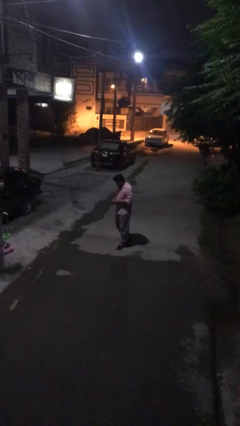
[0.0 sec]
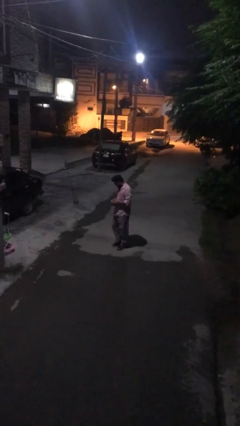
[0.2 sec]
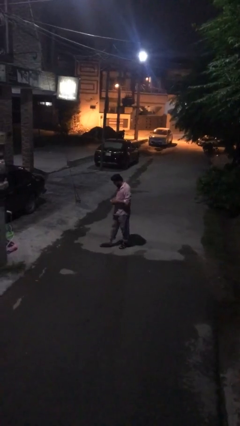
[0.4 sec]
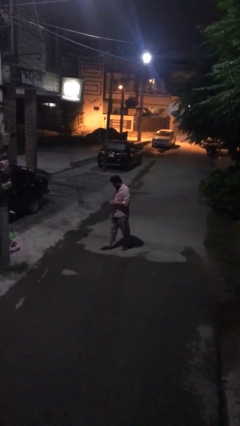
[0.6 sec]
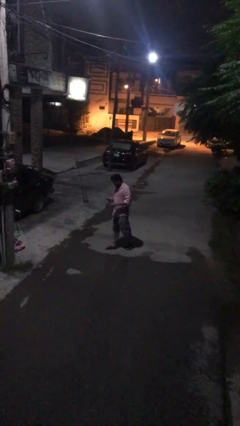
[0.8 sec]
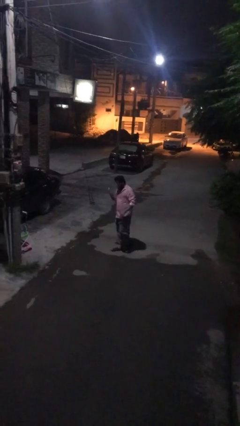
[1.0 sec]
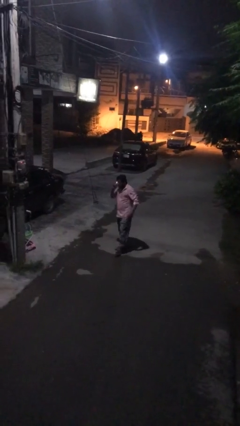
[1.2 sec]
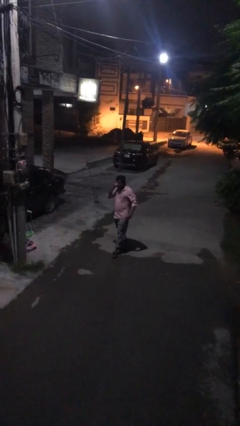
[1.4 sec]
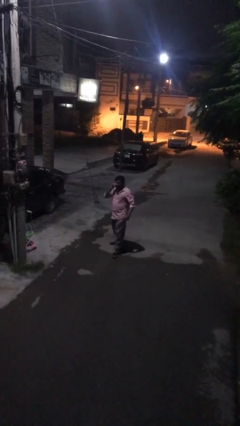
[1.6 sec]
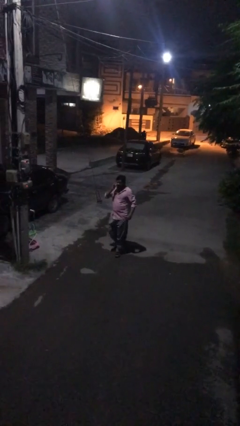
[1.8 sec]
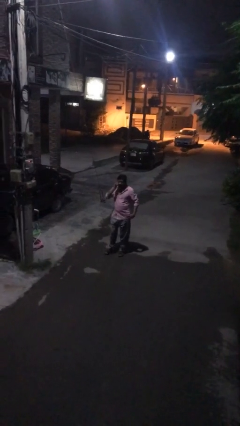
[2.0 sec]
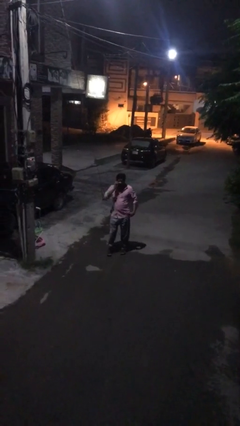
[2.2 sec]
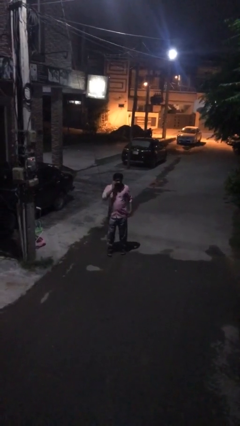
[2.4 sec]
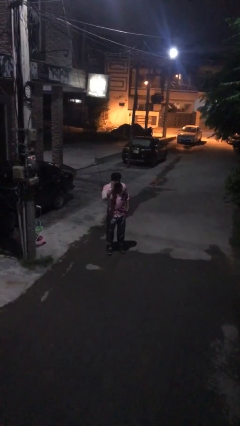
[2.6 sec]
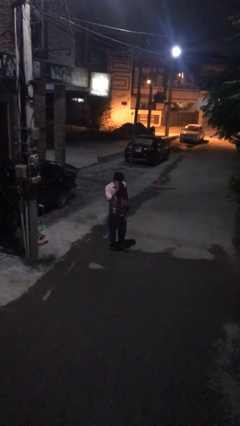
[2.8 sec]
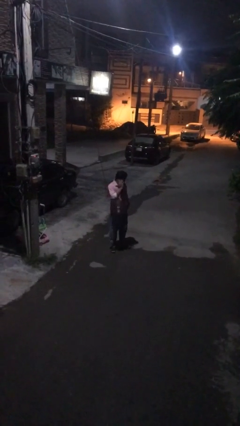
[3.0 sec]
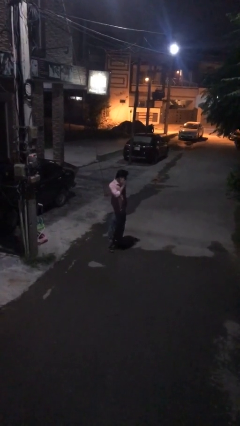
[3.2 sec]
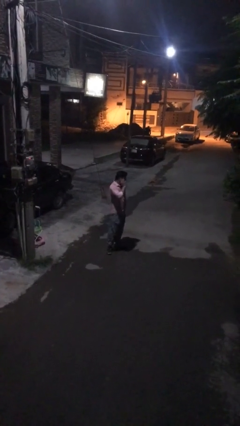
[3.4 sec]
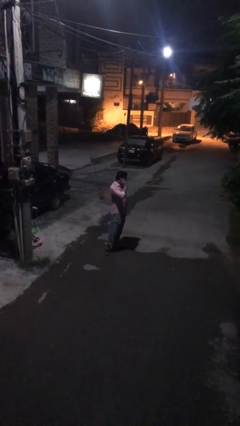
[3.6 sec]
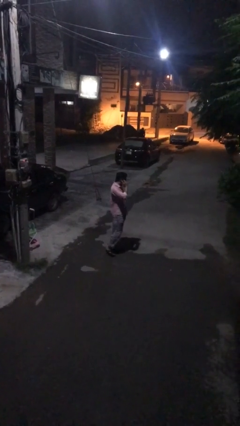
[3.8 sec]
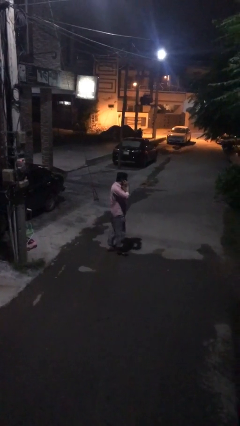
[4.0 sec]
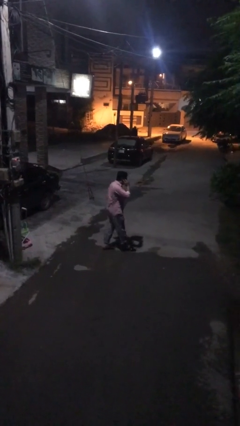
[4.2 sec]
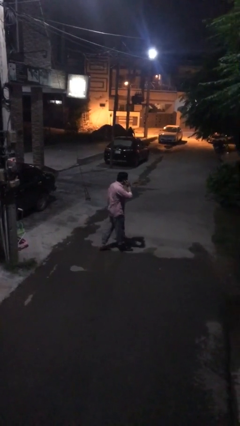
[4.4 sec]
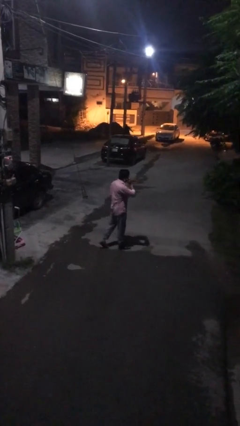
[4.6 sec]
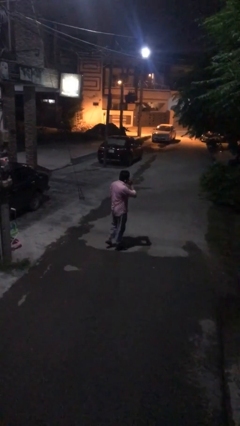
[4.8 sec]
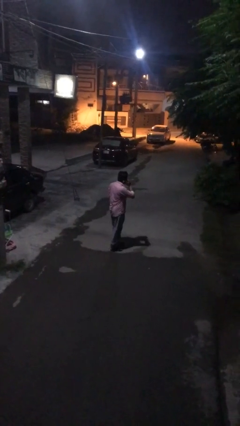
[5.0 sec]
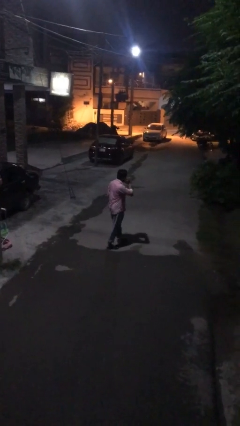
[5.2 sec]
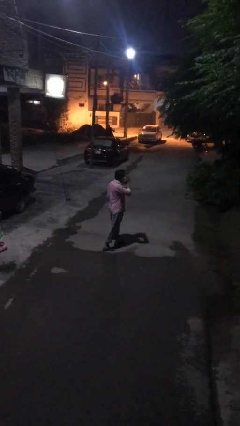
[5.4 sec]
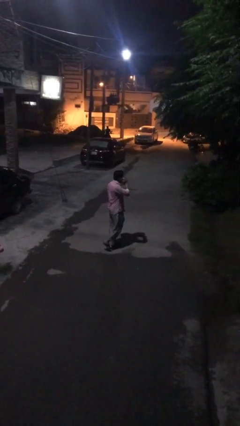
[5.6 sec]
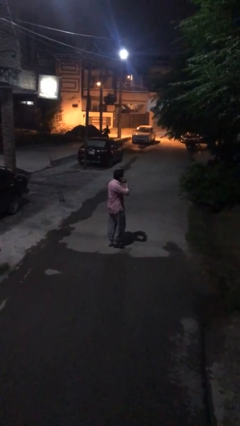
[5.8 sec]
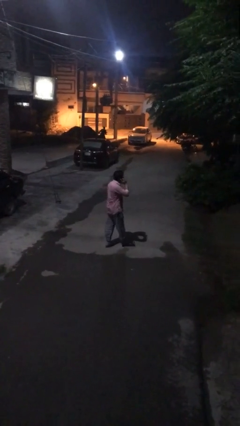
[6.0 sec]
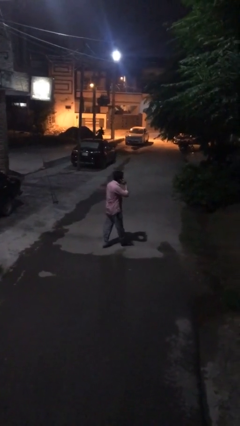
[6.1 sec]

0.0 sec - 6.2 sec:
person talks on phone

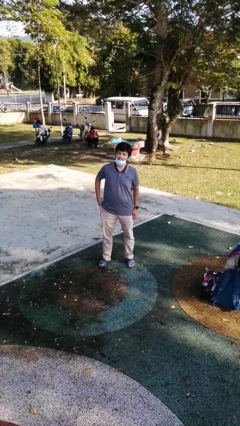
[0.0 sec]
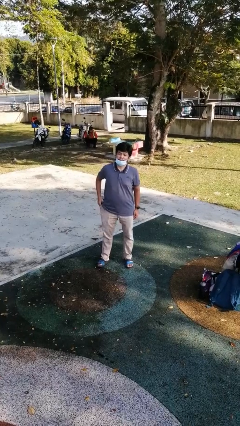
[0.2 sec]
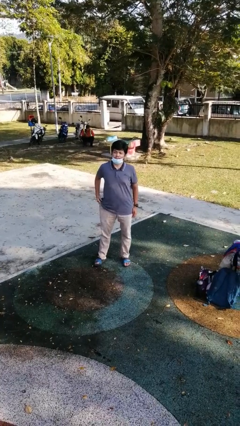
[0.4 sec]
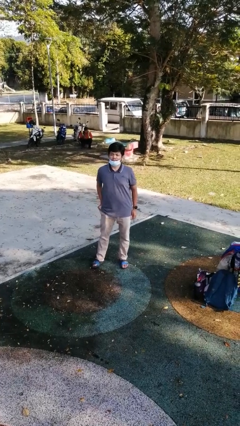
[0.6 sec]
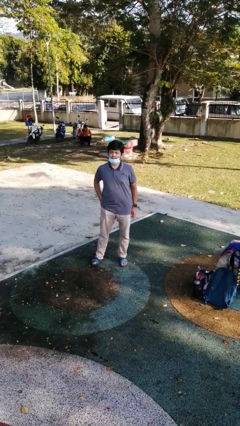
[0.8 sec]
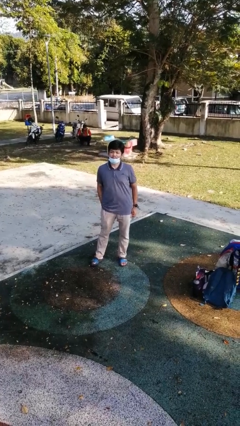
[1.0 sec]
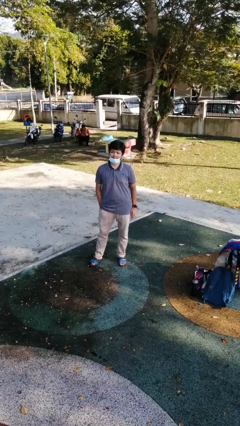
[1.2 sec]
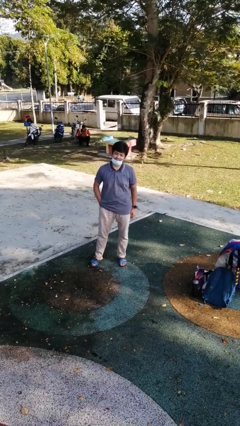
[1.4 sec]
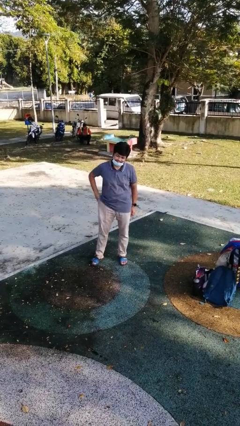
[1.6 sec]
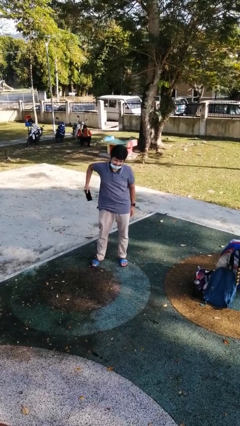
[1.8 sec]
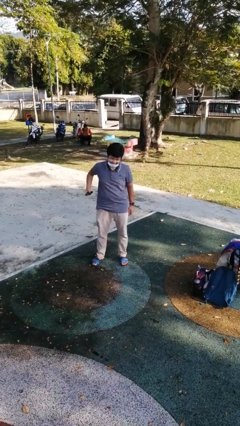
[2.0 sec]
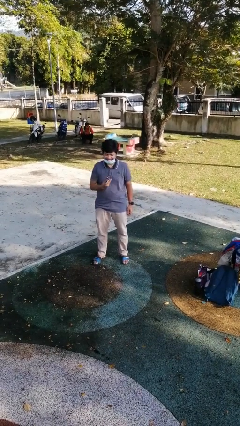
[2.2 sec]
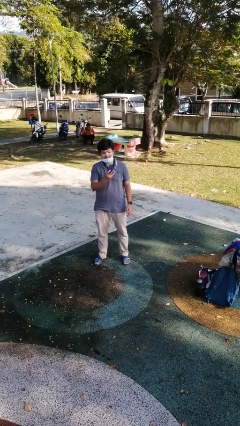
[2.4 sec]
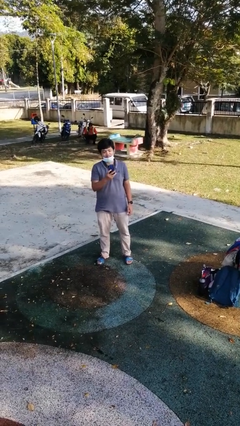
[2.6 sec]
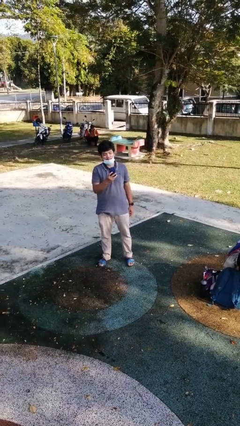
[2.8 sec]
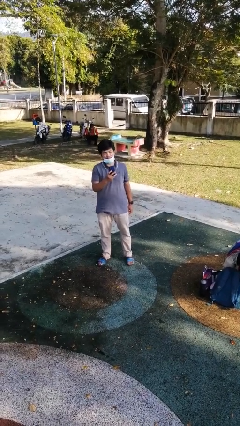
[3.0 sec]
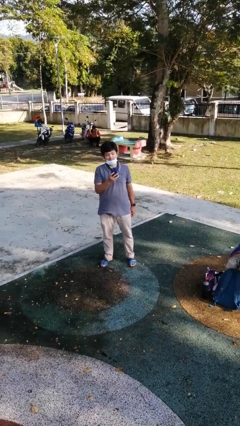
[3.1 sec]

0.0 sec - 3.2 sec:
person takes phone from pocket

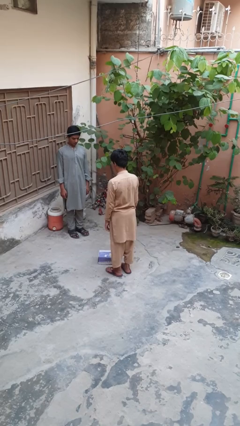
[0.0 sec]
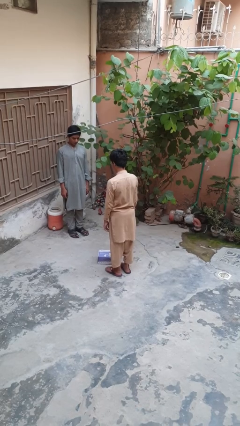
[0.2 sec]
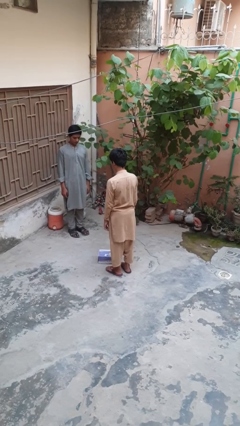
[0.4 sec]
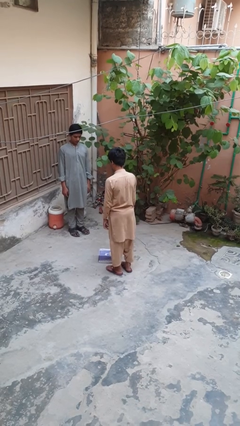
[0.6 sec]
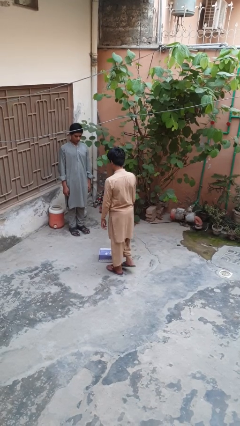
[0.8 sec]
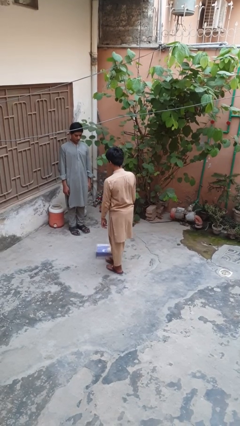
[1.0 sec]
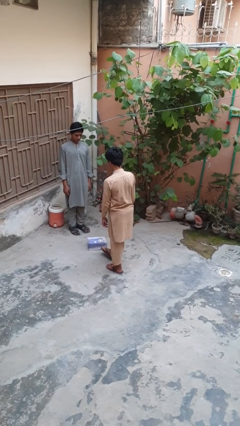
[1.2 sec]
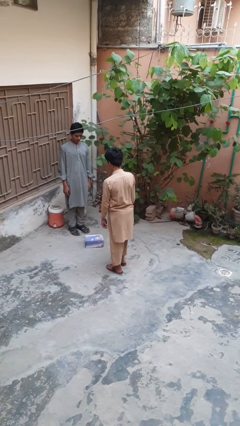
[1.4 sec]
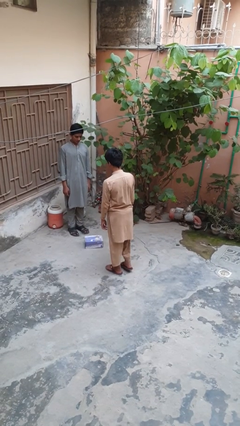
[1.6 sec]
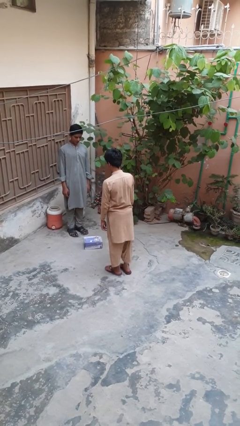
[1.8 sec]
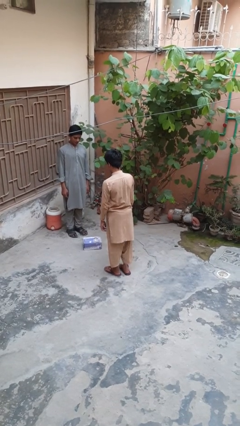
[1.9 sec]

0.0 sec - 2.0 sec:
person kicks object to person

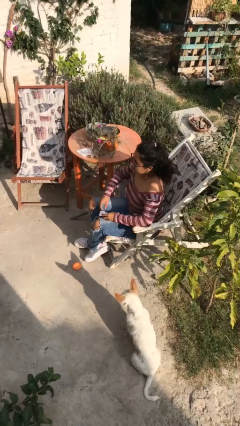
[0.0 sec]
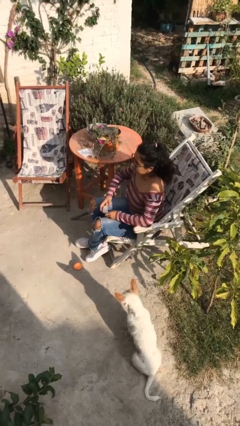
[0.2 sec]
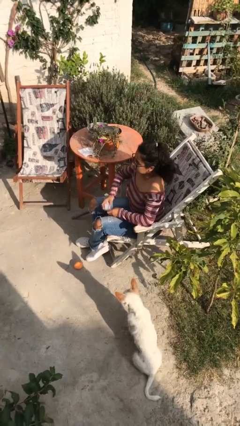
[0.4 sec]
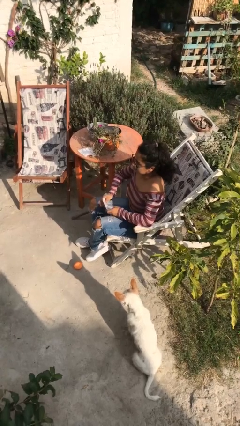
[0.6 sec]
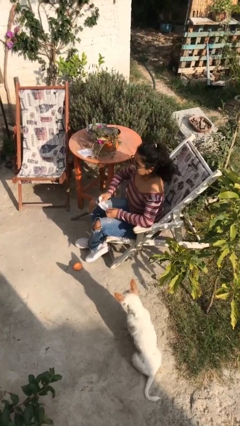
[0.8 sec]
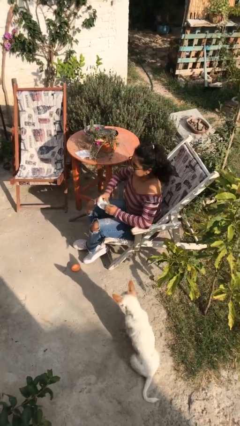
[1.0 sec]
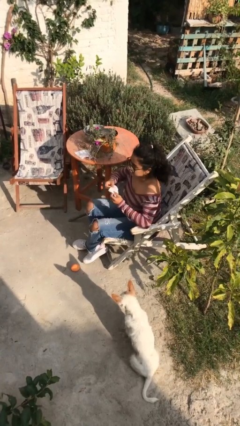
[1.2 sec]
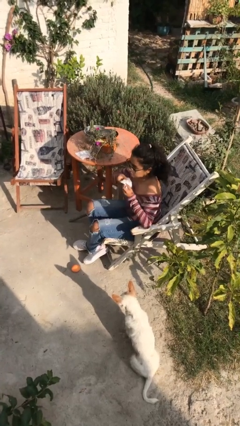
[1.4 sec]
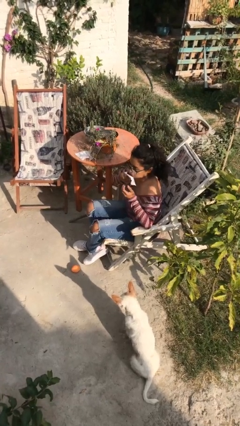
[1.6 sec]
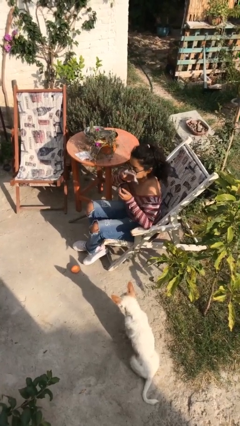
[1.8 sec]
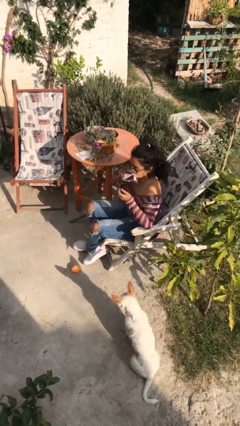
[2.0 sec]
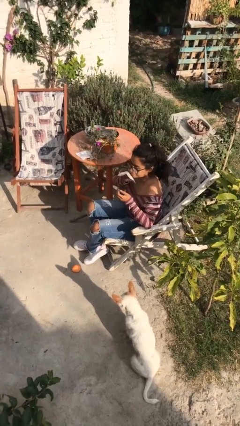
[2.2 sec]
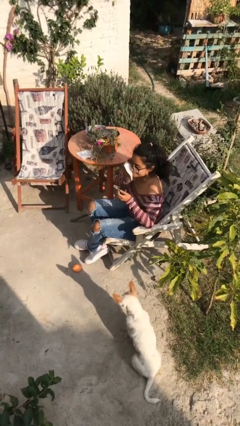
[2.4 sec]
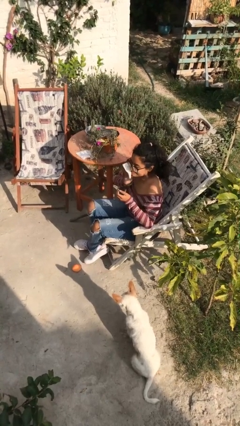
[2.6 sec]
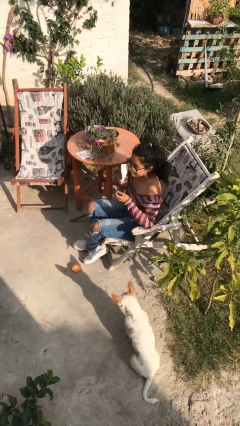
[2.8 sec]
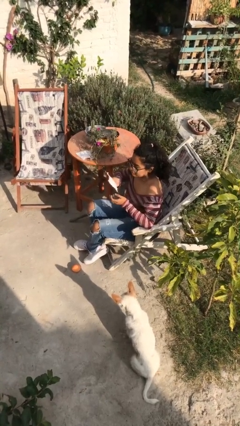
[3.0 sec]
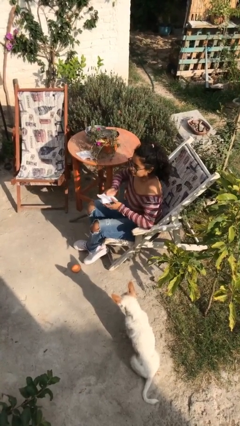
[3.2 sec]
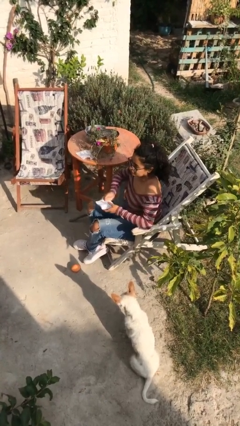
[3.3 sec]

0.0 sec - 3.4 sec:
person wipes mouth with napkin

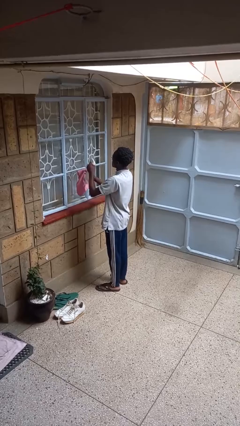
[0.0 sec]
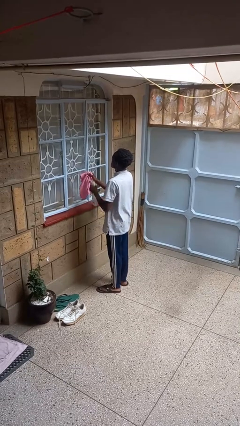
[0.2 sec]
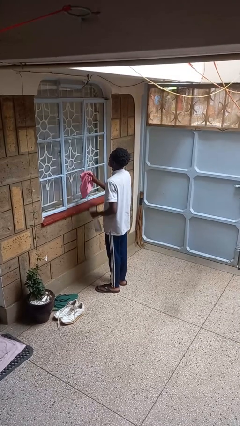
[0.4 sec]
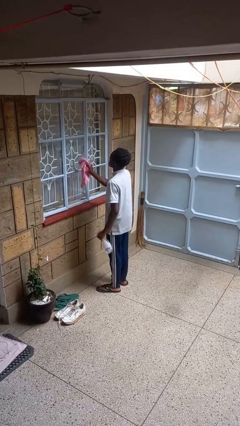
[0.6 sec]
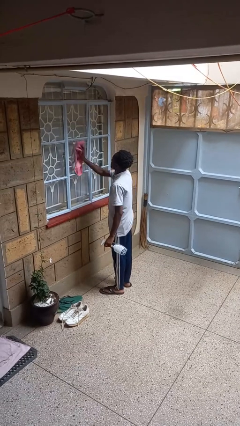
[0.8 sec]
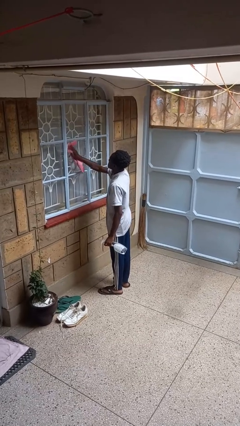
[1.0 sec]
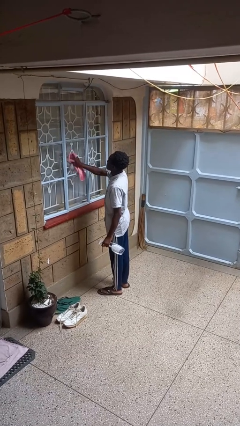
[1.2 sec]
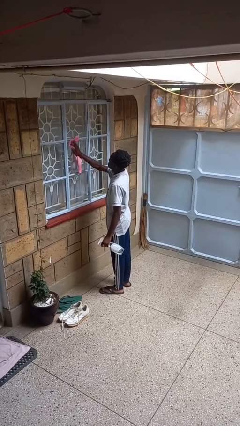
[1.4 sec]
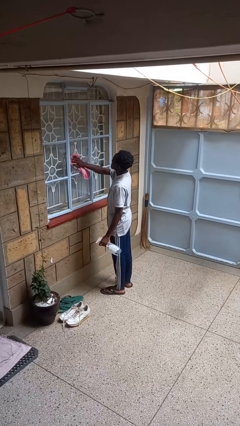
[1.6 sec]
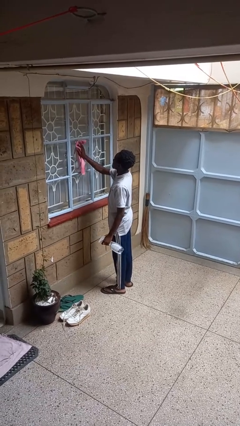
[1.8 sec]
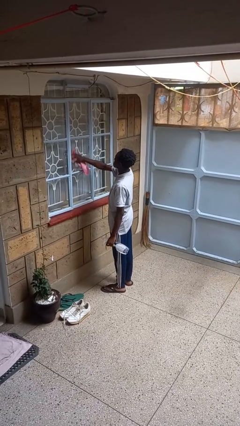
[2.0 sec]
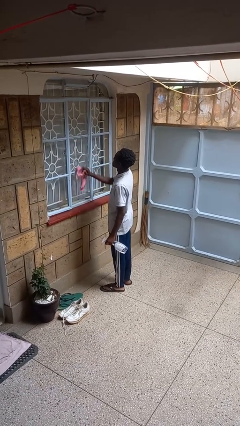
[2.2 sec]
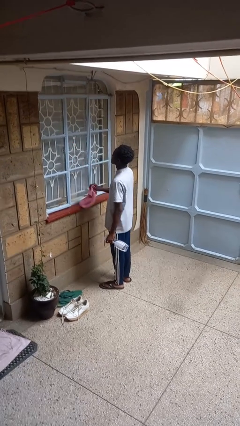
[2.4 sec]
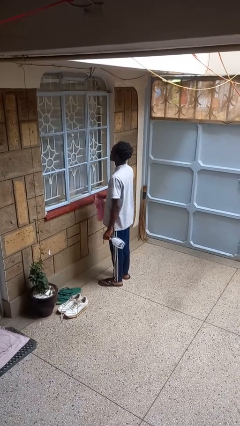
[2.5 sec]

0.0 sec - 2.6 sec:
person washes window
